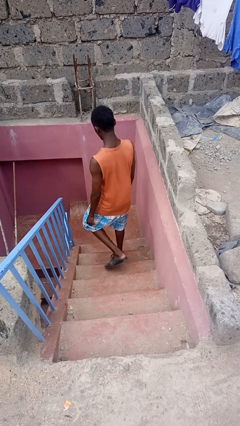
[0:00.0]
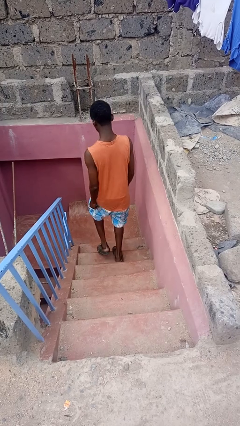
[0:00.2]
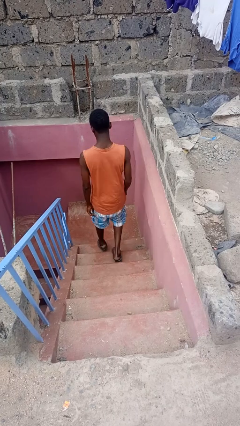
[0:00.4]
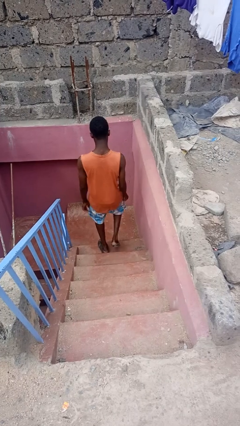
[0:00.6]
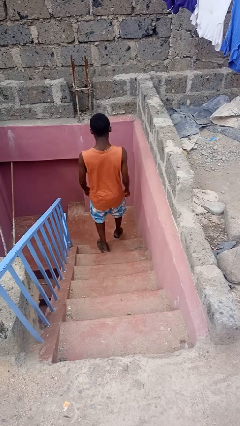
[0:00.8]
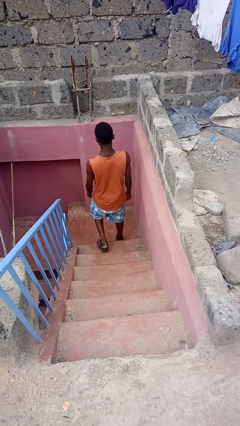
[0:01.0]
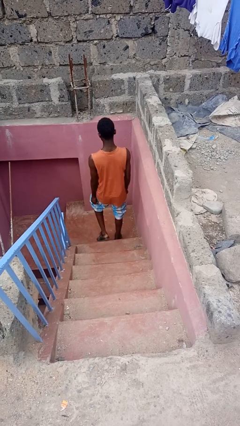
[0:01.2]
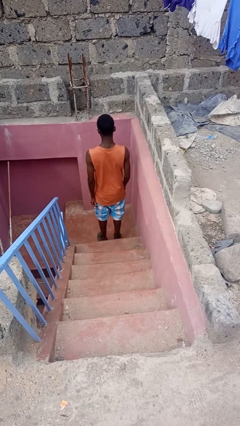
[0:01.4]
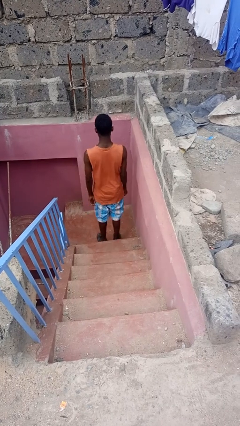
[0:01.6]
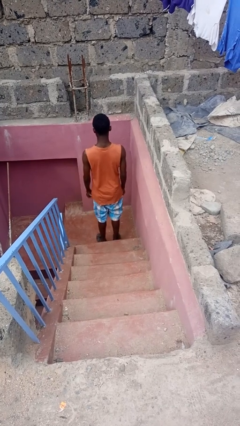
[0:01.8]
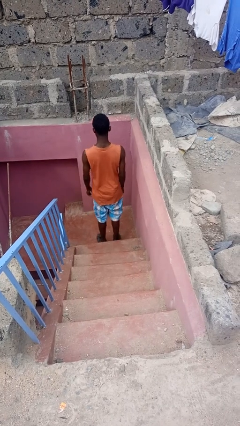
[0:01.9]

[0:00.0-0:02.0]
person climbs down stairs

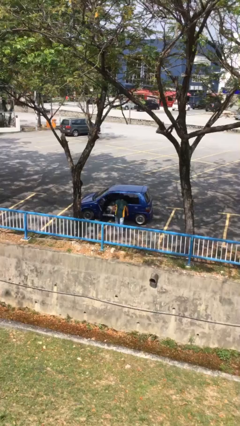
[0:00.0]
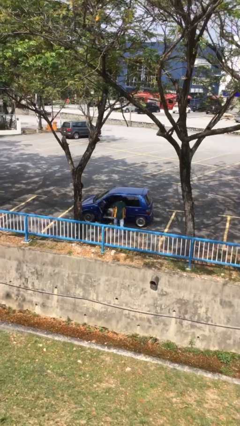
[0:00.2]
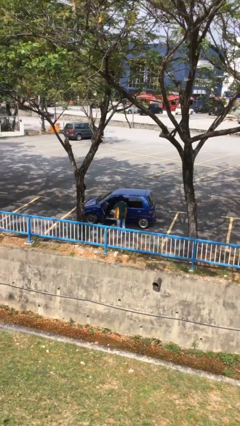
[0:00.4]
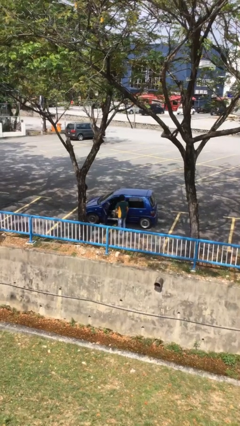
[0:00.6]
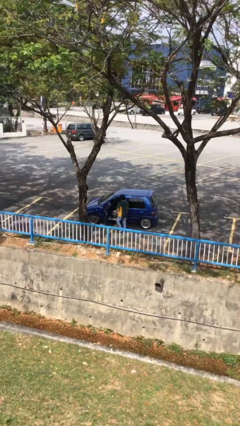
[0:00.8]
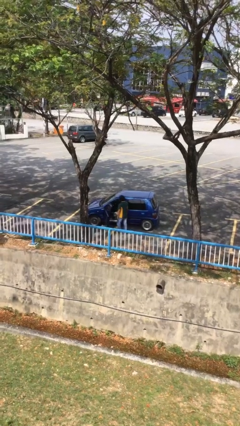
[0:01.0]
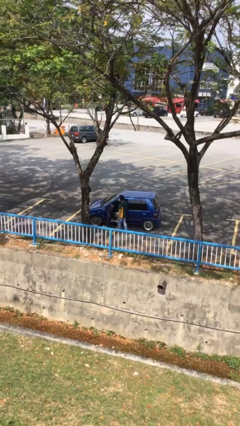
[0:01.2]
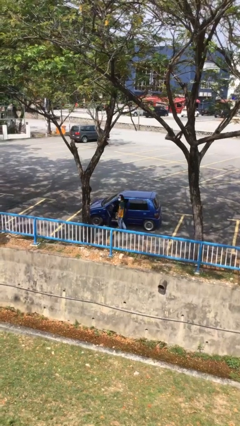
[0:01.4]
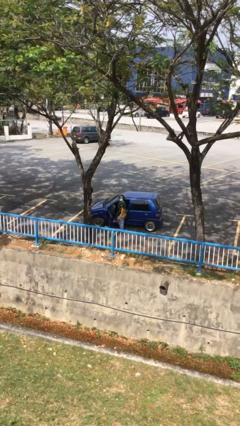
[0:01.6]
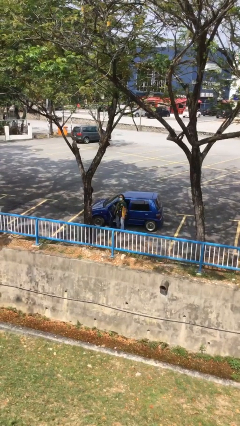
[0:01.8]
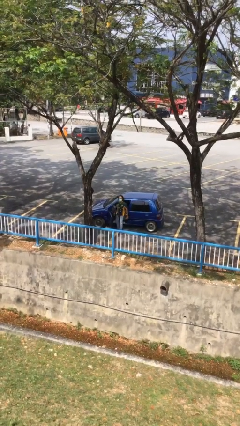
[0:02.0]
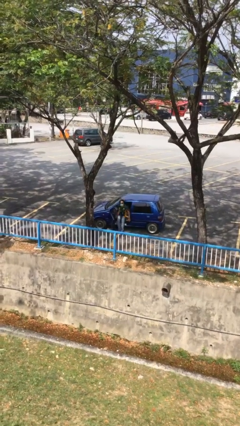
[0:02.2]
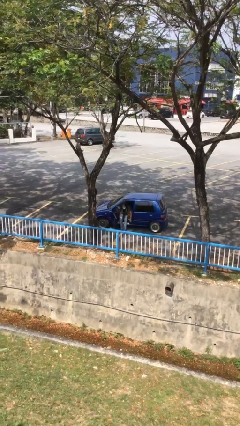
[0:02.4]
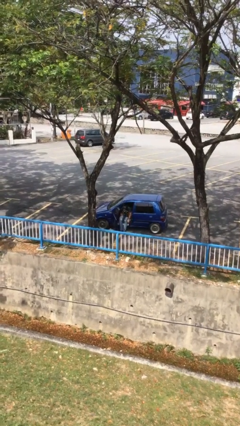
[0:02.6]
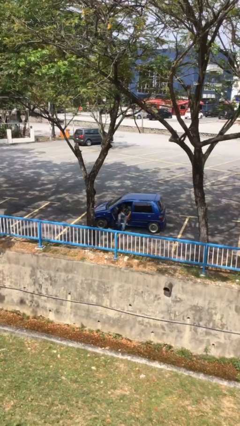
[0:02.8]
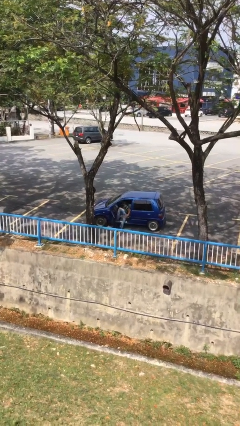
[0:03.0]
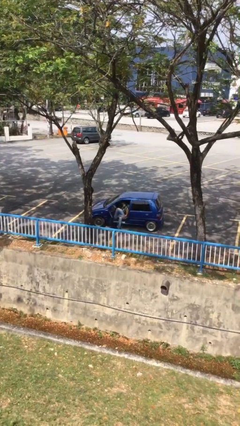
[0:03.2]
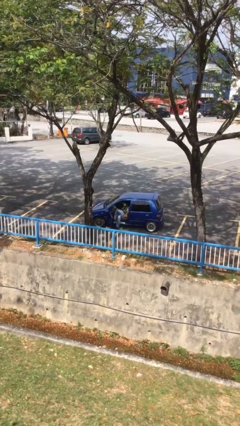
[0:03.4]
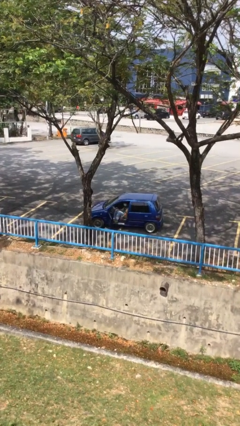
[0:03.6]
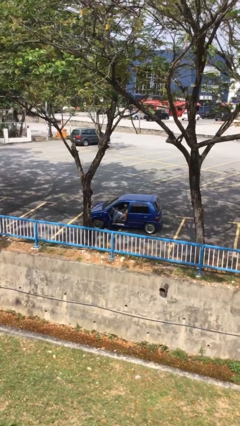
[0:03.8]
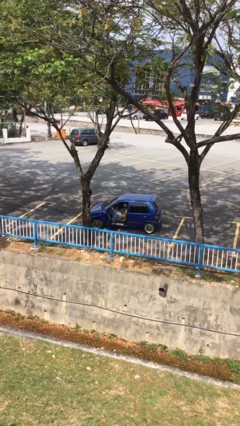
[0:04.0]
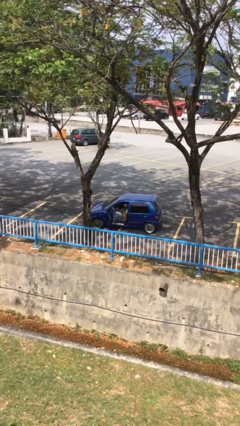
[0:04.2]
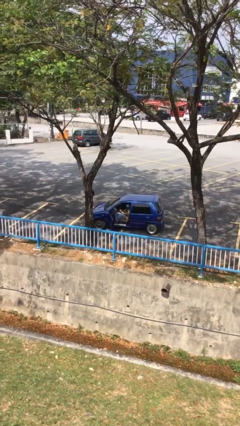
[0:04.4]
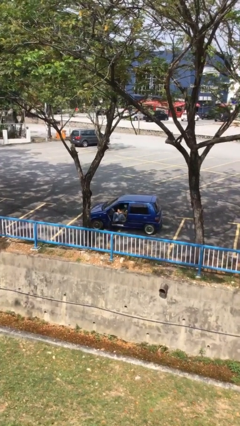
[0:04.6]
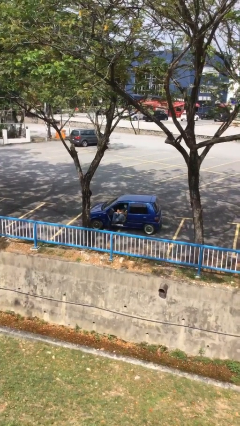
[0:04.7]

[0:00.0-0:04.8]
person enters car

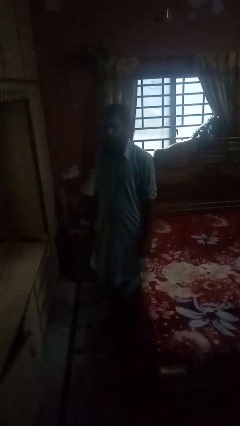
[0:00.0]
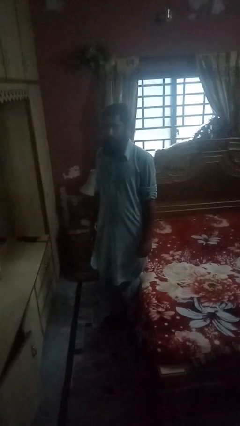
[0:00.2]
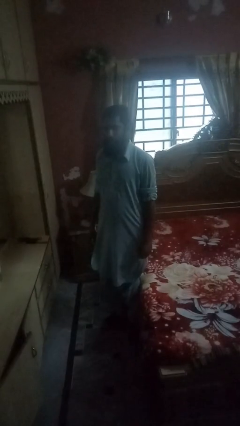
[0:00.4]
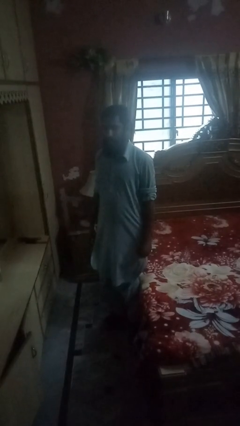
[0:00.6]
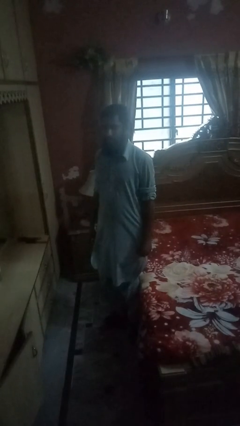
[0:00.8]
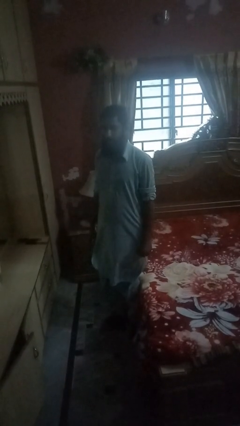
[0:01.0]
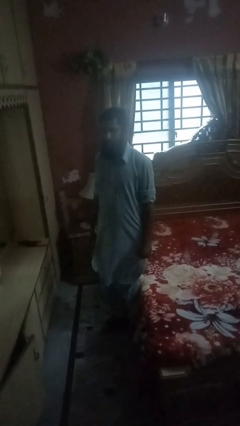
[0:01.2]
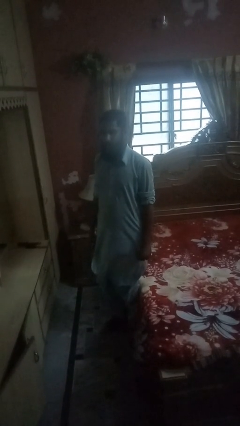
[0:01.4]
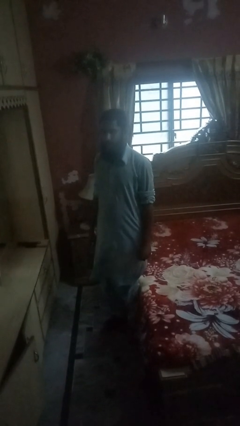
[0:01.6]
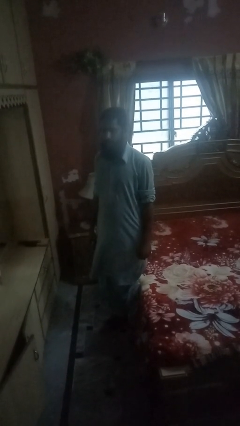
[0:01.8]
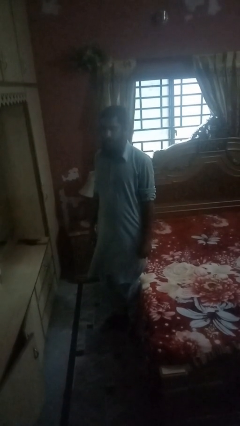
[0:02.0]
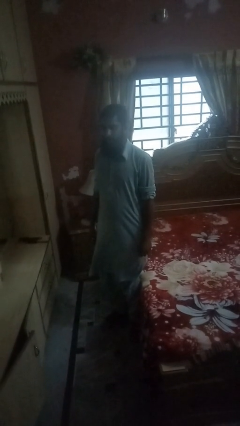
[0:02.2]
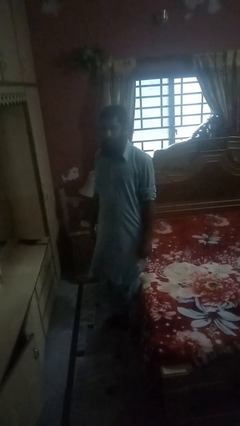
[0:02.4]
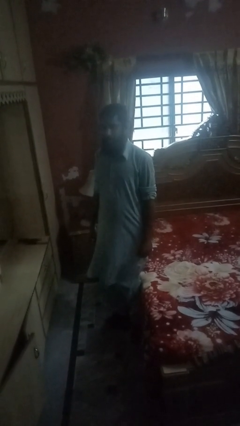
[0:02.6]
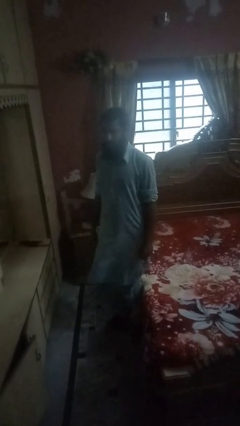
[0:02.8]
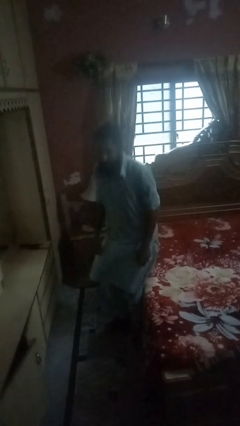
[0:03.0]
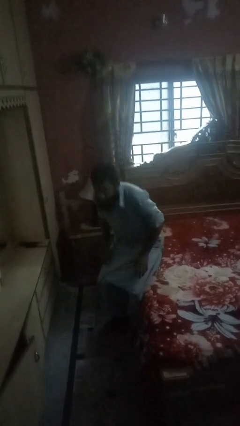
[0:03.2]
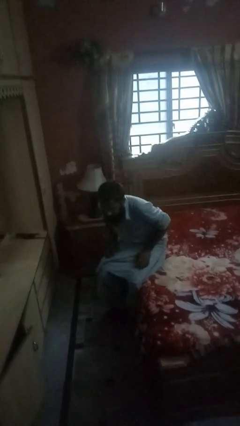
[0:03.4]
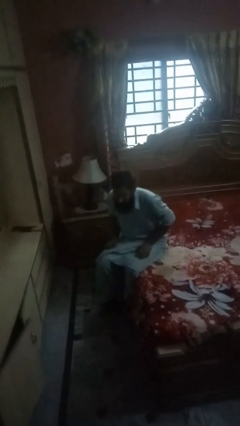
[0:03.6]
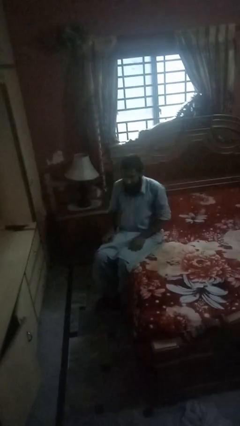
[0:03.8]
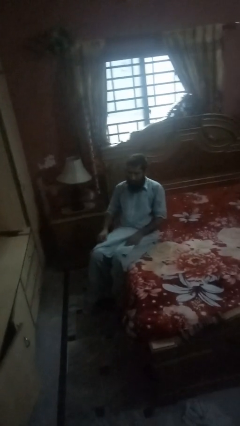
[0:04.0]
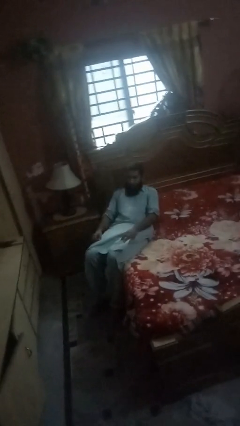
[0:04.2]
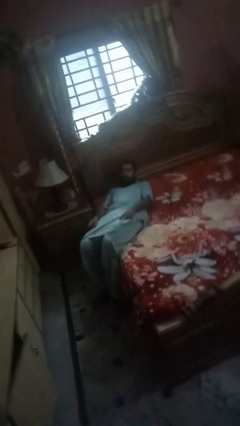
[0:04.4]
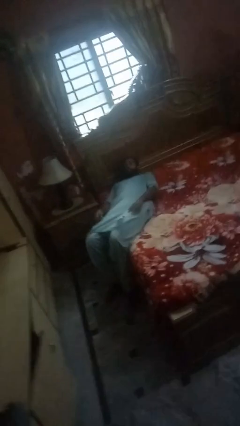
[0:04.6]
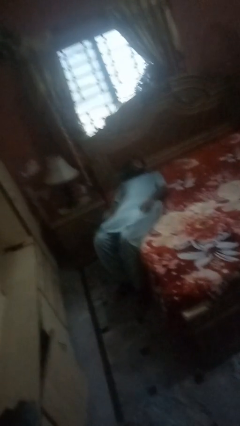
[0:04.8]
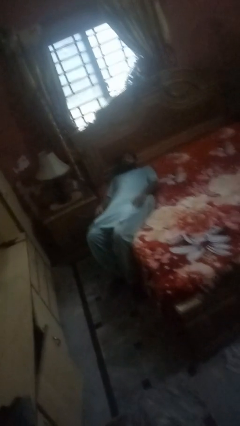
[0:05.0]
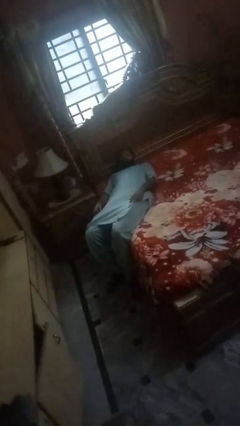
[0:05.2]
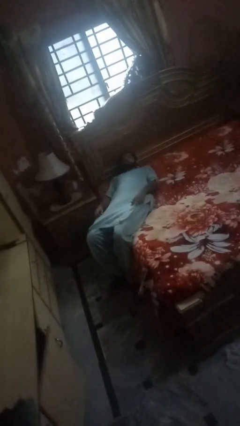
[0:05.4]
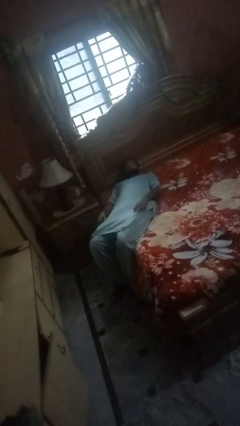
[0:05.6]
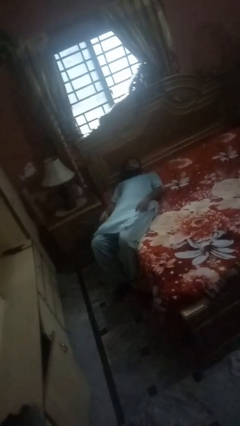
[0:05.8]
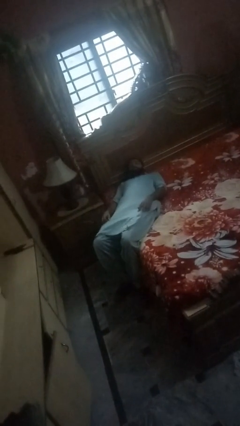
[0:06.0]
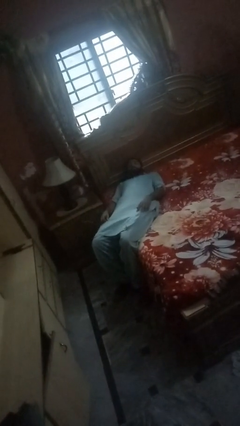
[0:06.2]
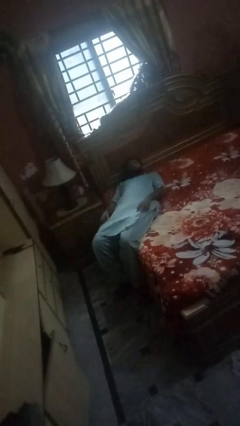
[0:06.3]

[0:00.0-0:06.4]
person lies down on bed

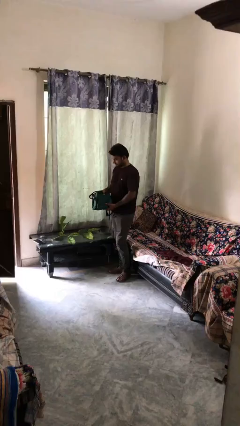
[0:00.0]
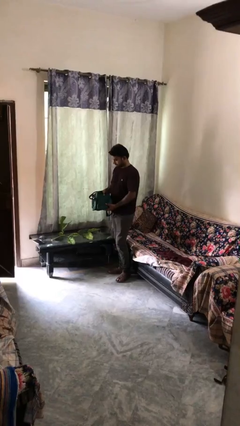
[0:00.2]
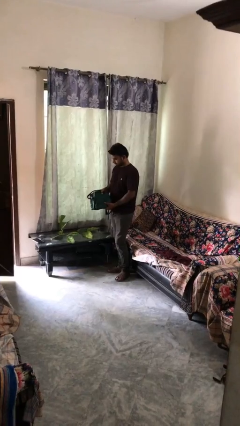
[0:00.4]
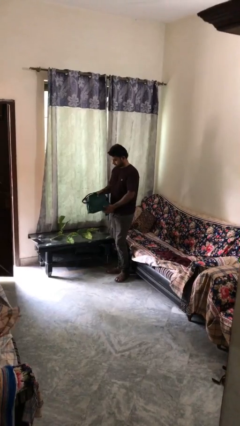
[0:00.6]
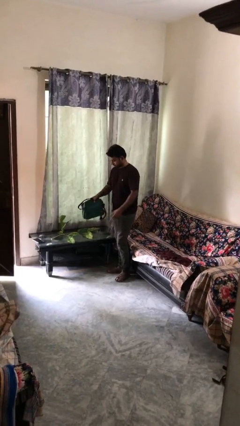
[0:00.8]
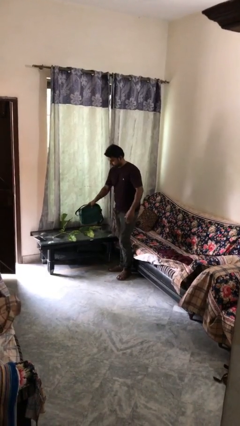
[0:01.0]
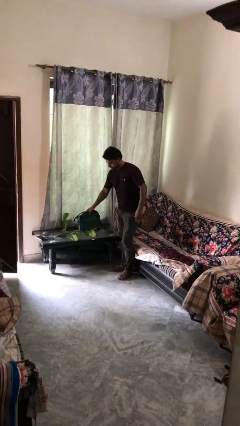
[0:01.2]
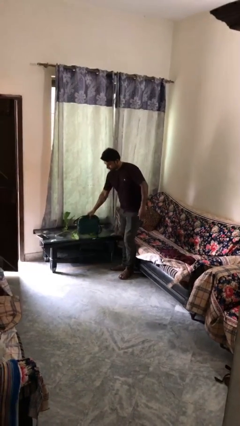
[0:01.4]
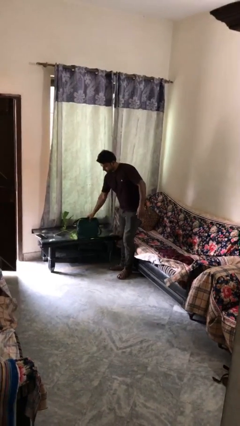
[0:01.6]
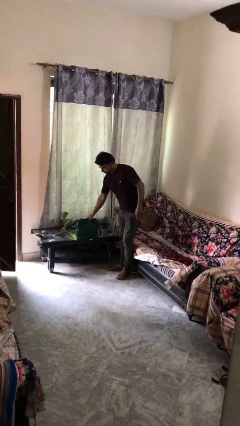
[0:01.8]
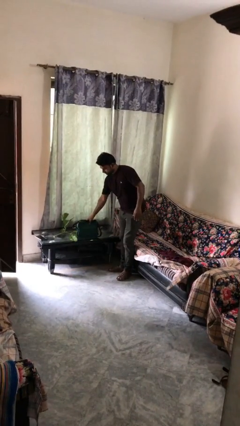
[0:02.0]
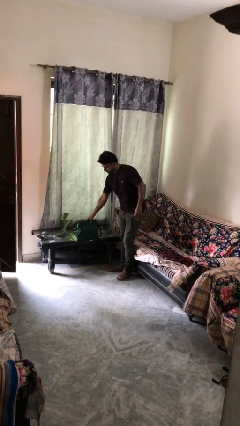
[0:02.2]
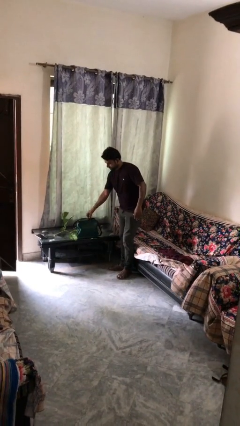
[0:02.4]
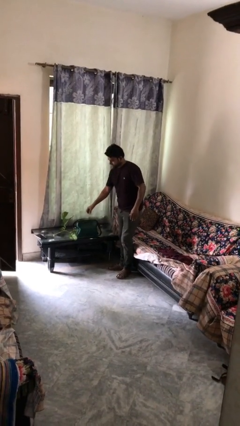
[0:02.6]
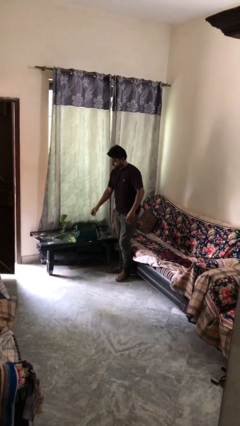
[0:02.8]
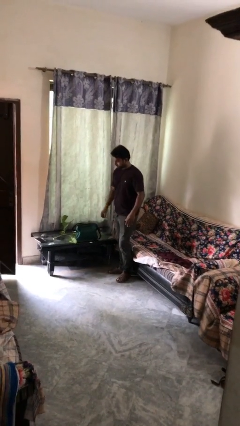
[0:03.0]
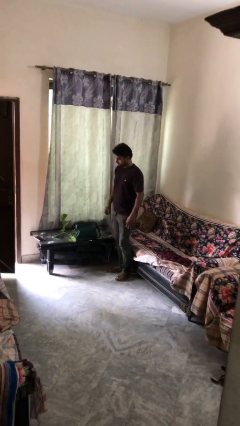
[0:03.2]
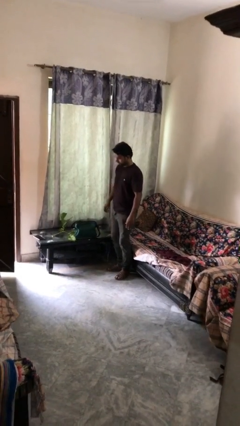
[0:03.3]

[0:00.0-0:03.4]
person puts down object on table

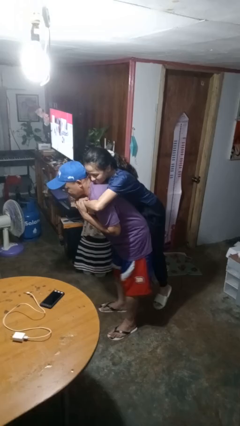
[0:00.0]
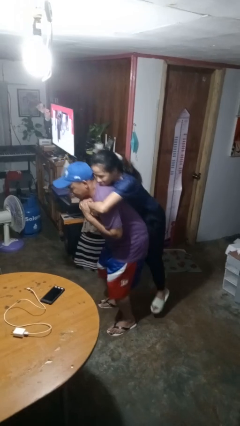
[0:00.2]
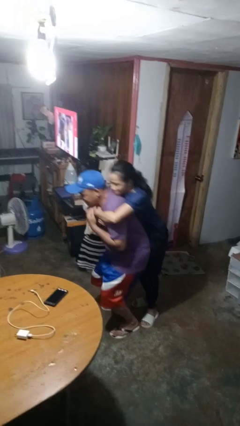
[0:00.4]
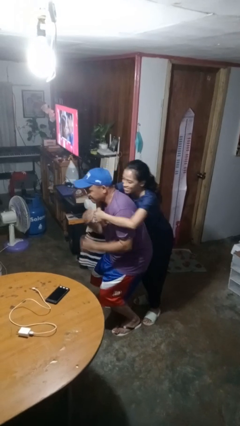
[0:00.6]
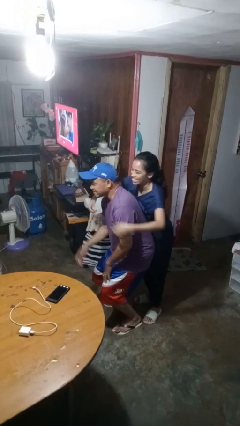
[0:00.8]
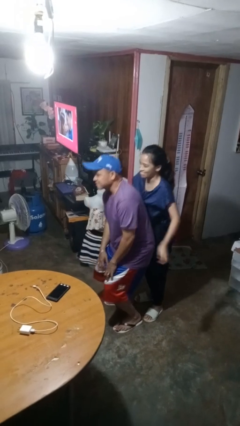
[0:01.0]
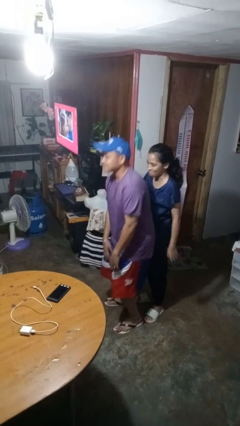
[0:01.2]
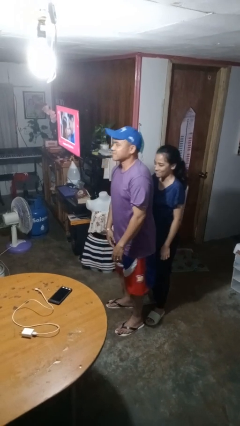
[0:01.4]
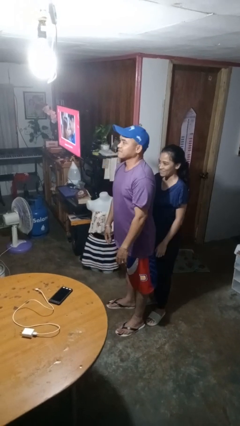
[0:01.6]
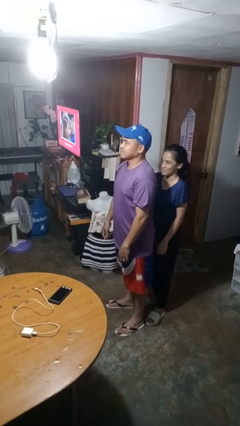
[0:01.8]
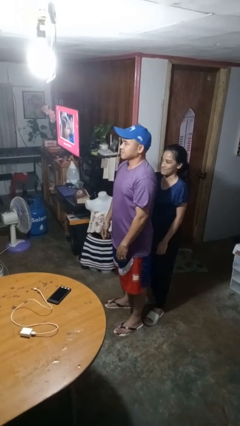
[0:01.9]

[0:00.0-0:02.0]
person puts down person
